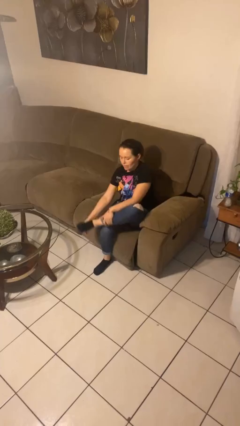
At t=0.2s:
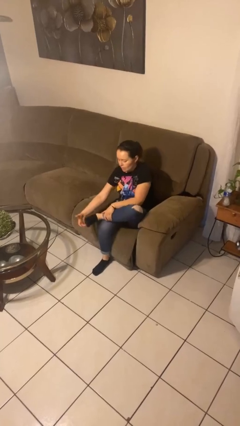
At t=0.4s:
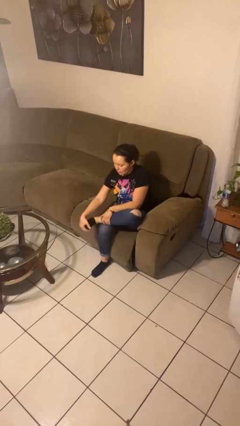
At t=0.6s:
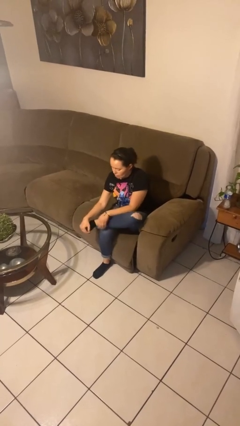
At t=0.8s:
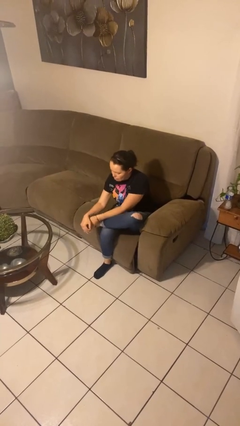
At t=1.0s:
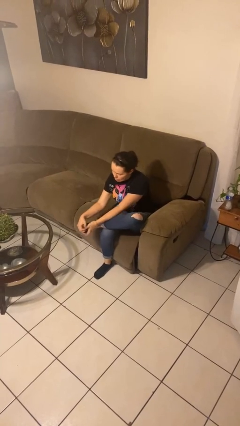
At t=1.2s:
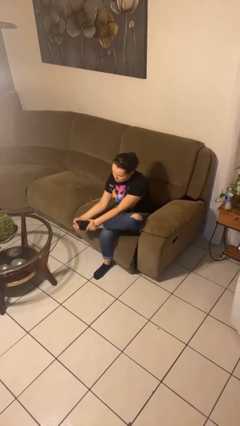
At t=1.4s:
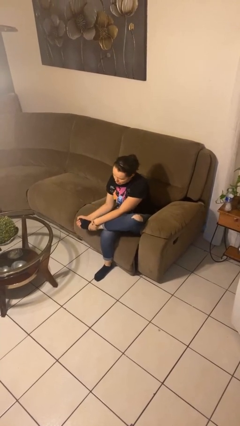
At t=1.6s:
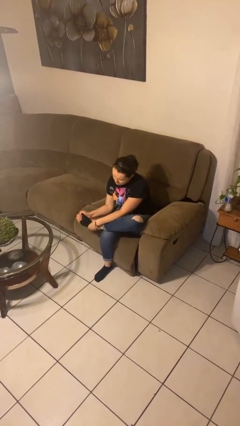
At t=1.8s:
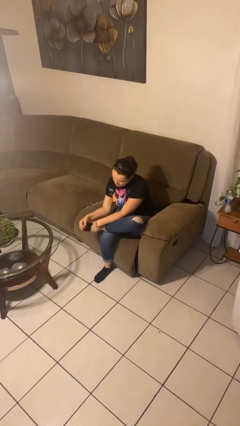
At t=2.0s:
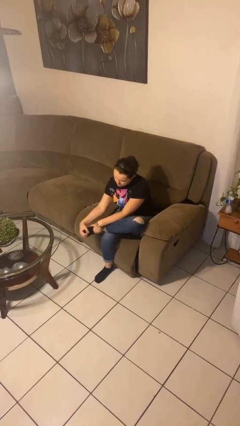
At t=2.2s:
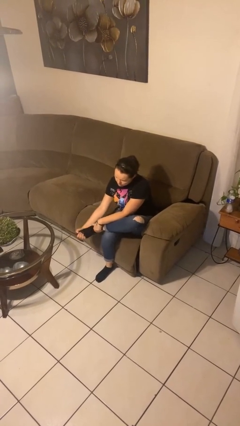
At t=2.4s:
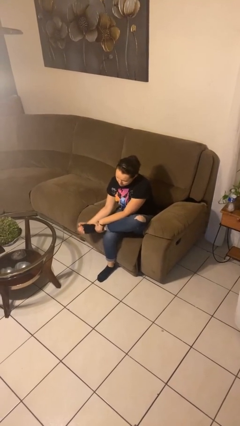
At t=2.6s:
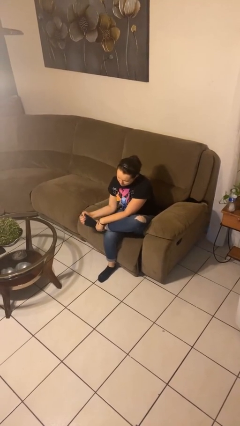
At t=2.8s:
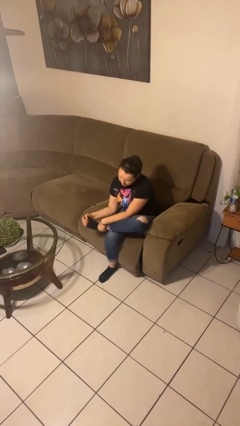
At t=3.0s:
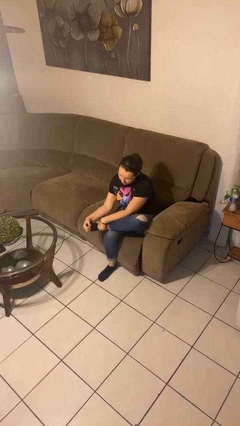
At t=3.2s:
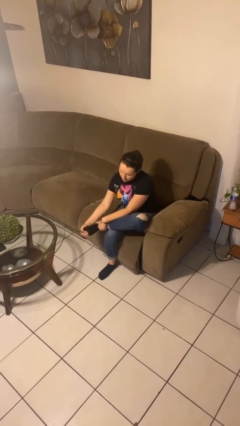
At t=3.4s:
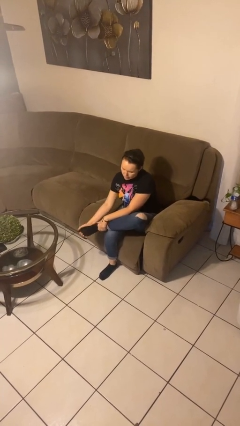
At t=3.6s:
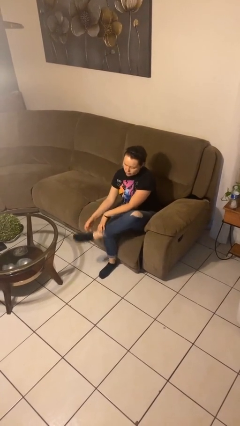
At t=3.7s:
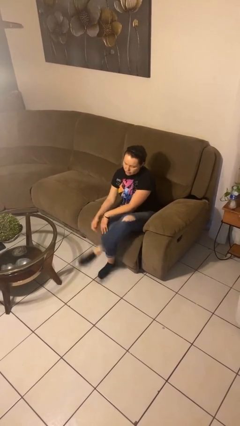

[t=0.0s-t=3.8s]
person rubs foot

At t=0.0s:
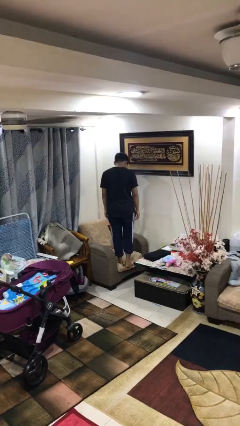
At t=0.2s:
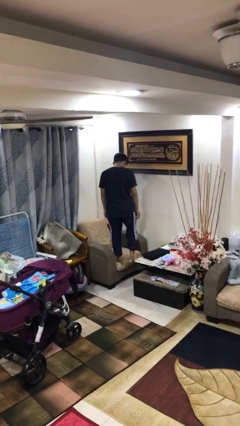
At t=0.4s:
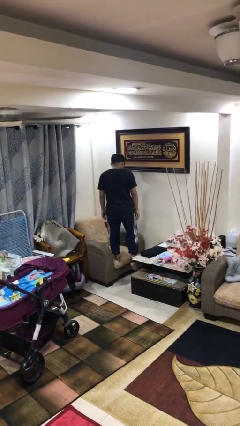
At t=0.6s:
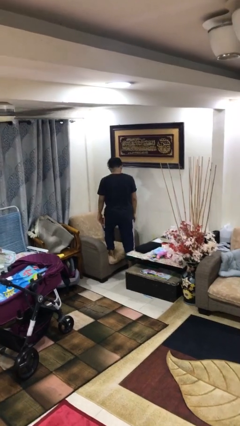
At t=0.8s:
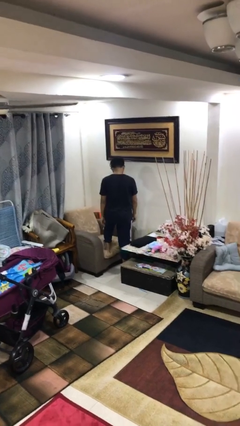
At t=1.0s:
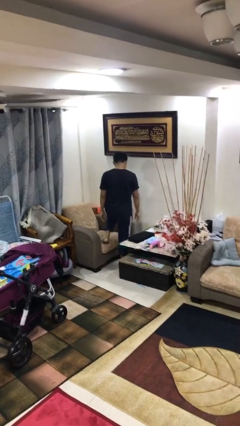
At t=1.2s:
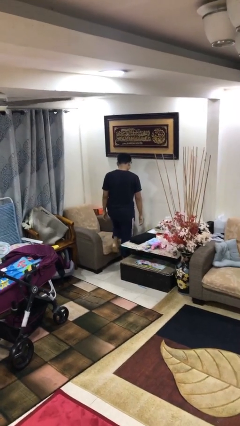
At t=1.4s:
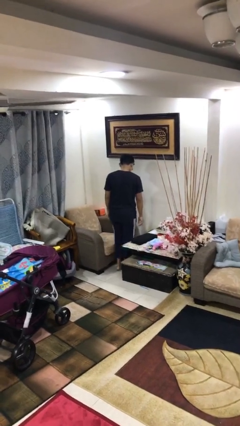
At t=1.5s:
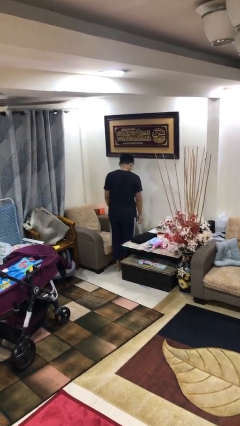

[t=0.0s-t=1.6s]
person climbs off couch

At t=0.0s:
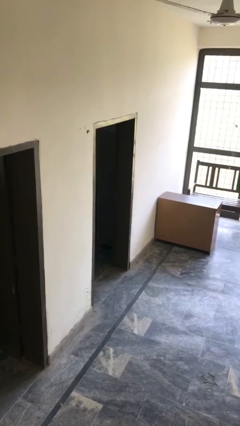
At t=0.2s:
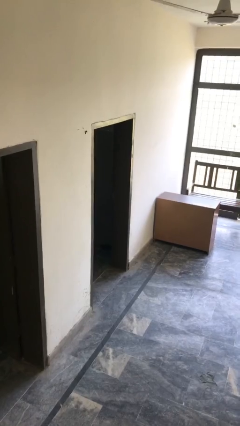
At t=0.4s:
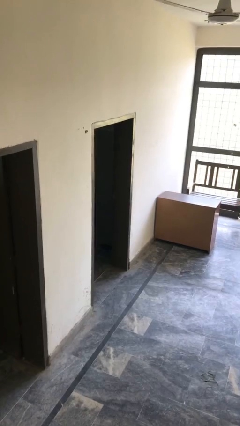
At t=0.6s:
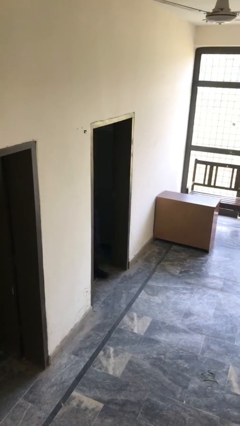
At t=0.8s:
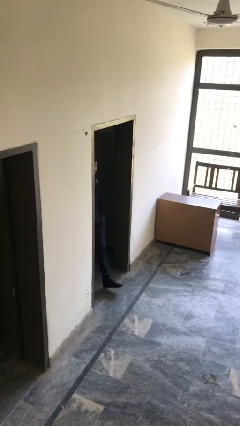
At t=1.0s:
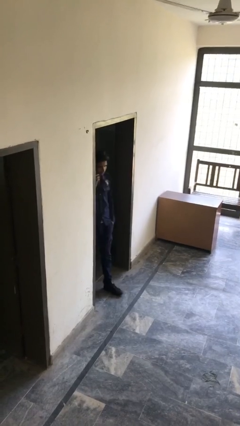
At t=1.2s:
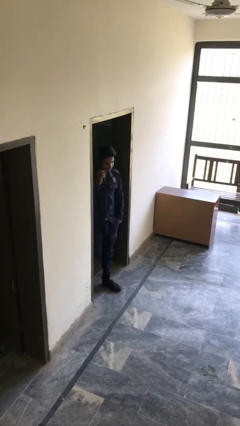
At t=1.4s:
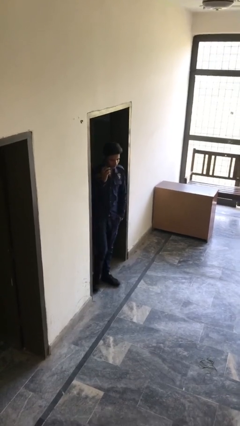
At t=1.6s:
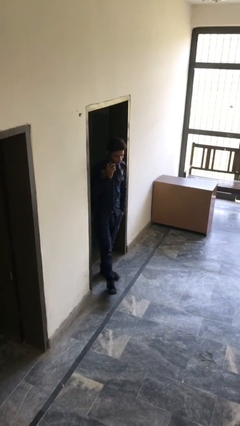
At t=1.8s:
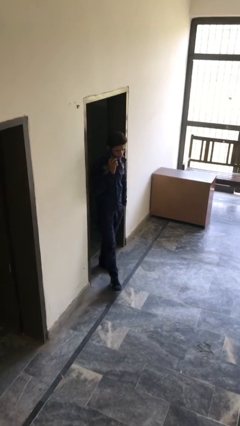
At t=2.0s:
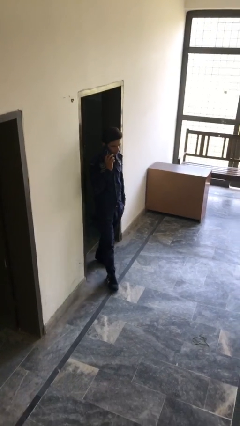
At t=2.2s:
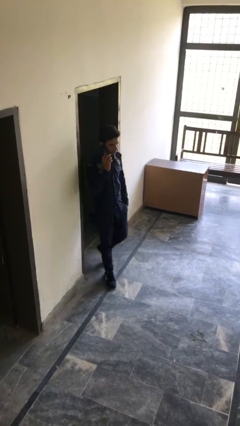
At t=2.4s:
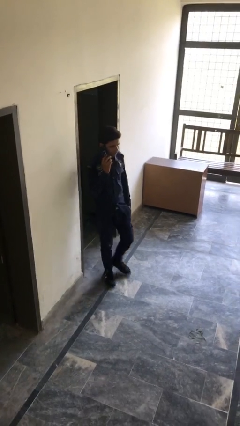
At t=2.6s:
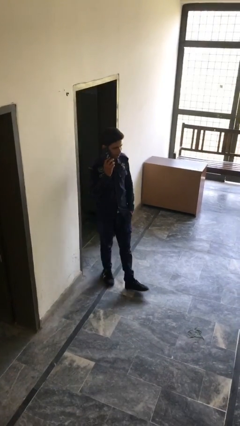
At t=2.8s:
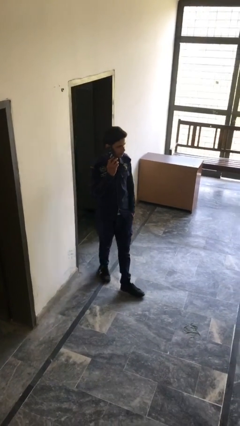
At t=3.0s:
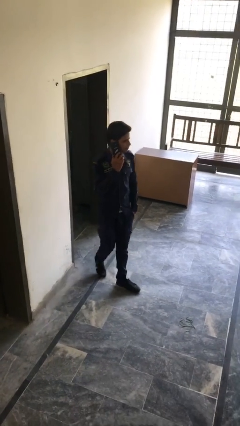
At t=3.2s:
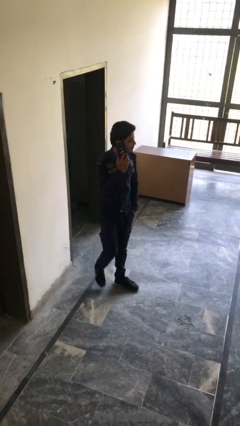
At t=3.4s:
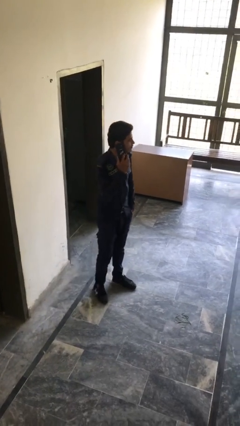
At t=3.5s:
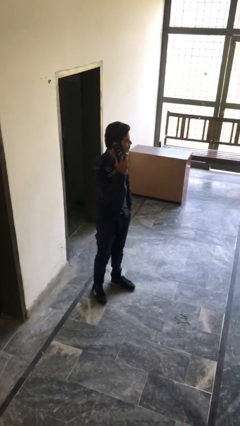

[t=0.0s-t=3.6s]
person enters scene through structure

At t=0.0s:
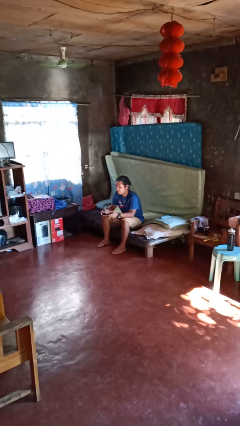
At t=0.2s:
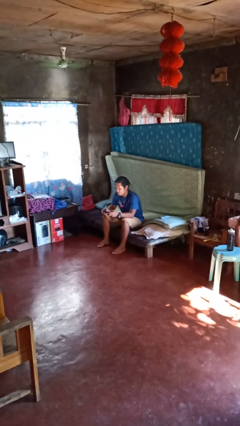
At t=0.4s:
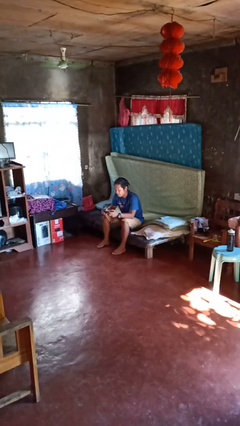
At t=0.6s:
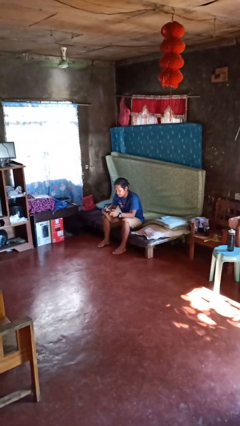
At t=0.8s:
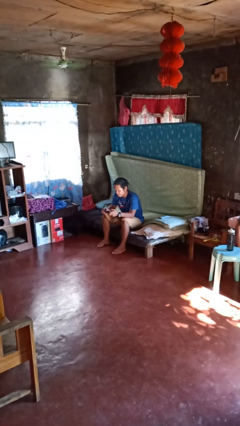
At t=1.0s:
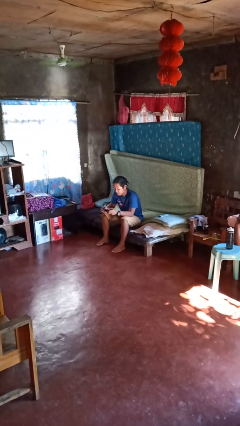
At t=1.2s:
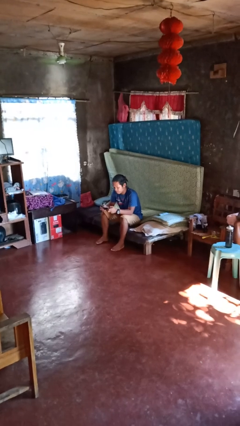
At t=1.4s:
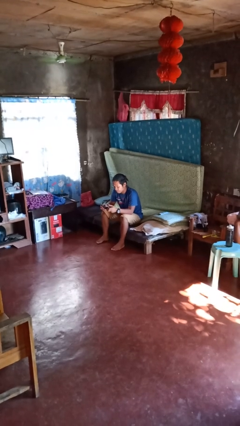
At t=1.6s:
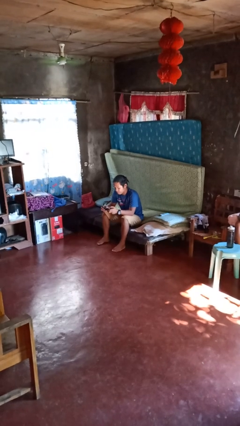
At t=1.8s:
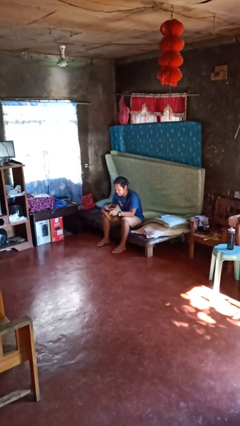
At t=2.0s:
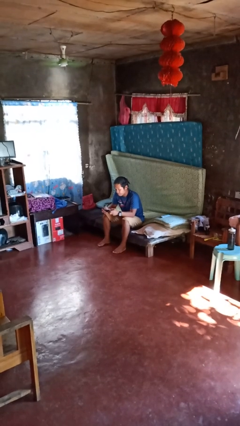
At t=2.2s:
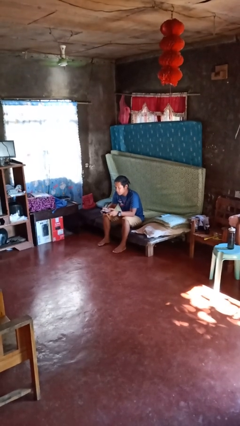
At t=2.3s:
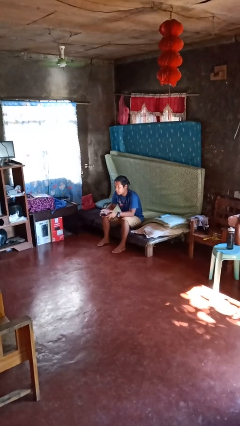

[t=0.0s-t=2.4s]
person interacts with handheld game

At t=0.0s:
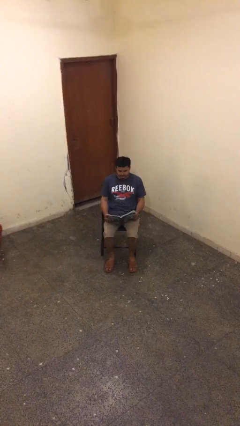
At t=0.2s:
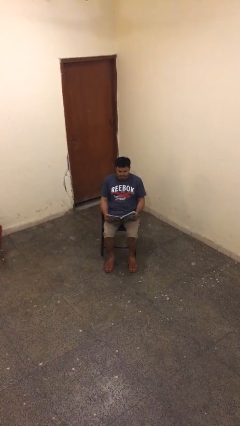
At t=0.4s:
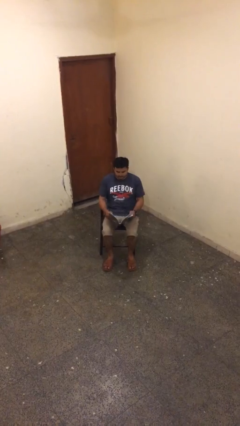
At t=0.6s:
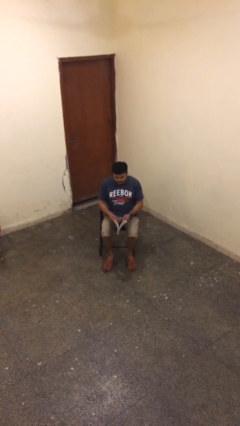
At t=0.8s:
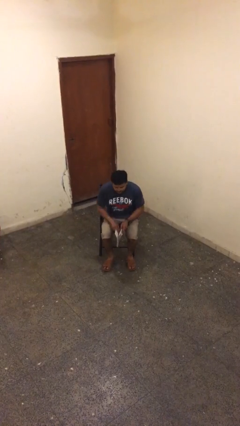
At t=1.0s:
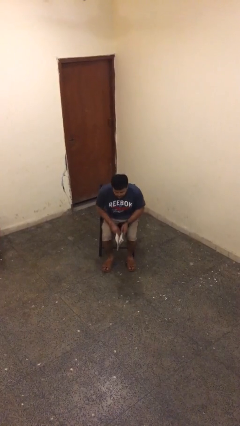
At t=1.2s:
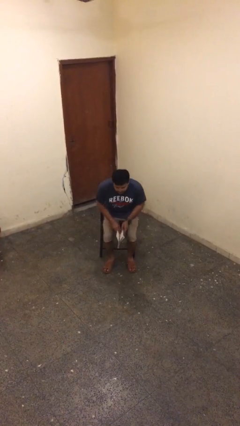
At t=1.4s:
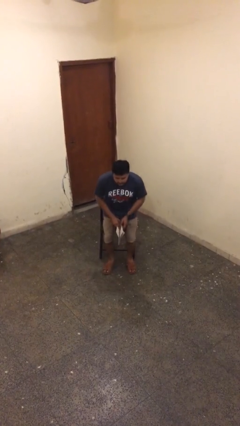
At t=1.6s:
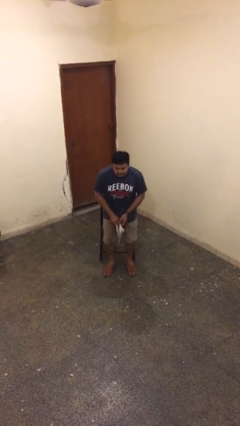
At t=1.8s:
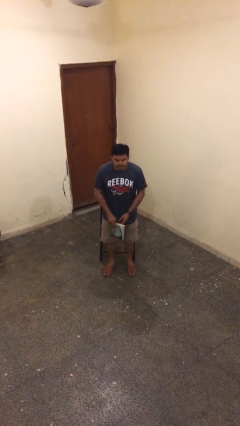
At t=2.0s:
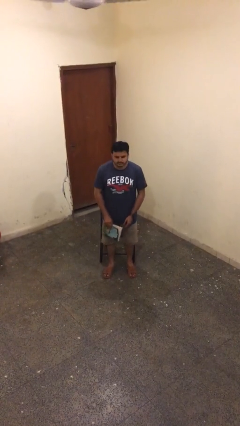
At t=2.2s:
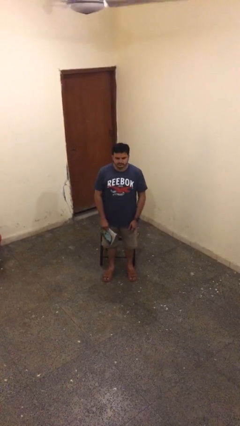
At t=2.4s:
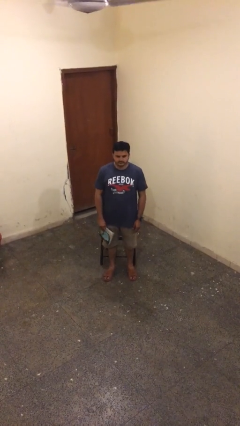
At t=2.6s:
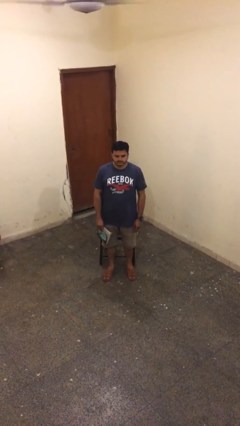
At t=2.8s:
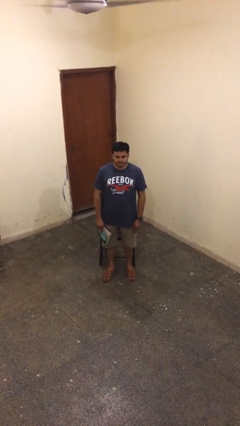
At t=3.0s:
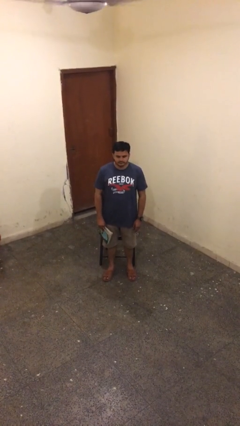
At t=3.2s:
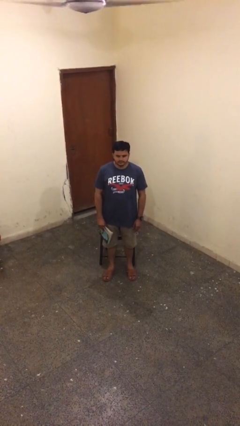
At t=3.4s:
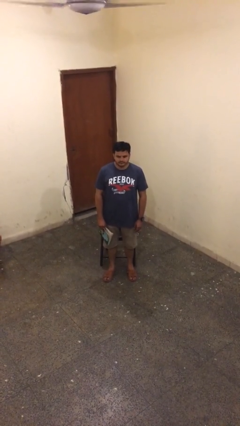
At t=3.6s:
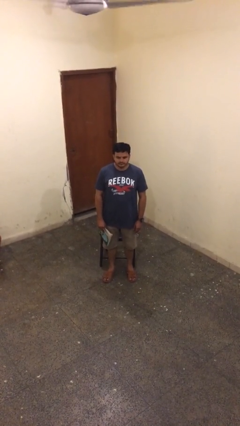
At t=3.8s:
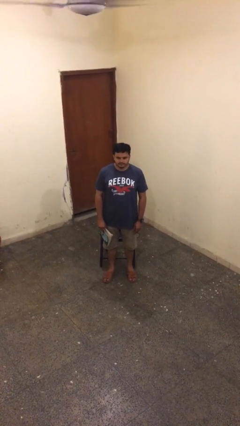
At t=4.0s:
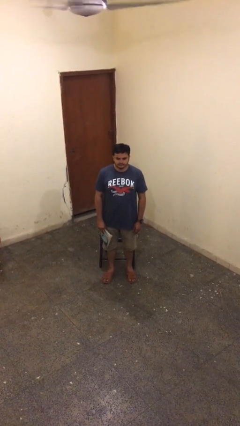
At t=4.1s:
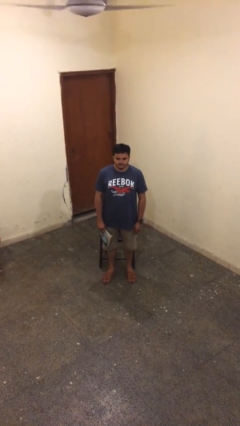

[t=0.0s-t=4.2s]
person stands up

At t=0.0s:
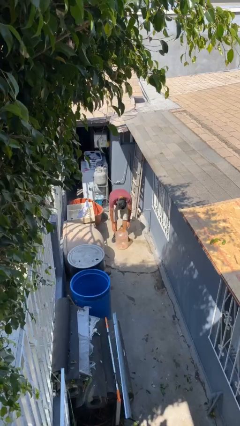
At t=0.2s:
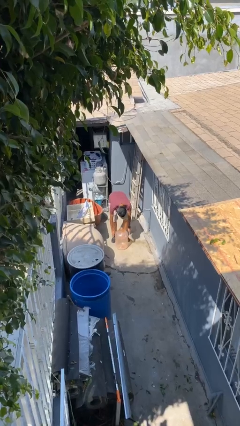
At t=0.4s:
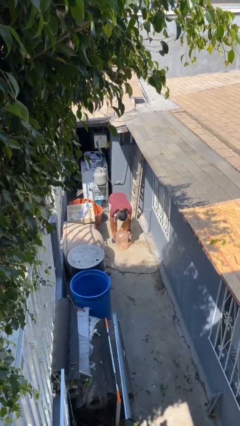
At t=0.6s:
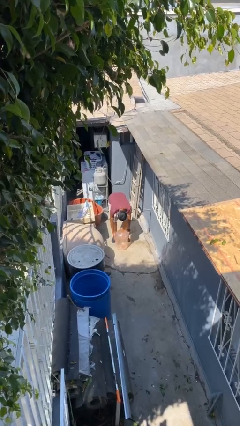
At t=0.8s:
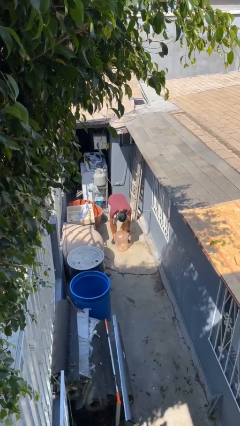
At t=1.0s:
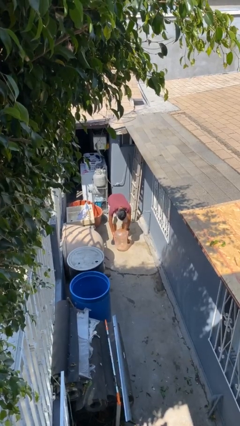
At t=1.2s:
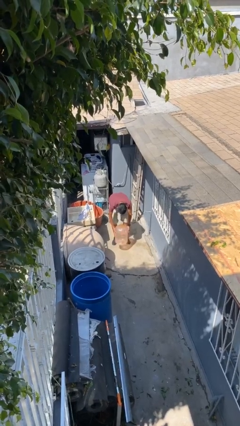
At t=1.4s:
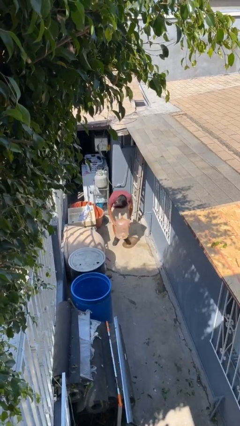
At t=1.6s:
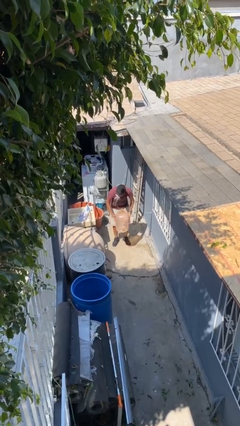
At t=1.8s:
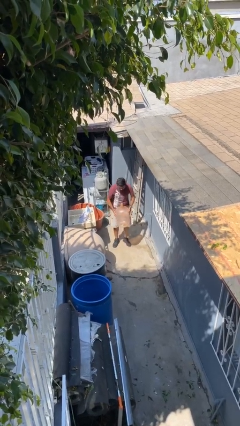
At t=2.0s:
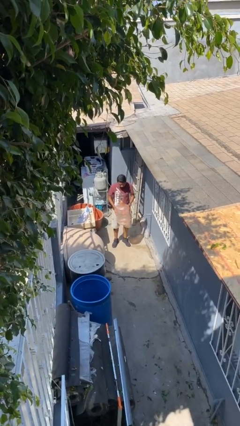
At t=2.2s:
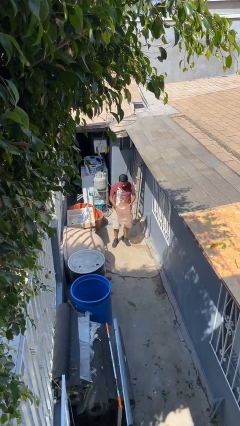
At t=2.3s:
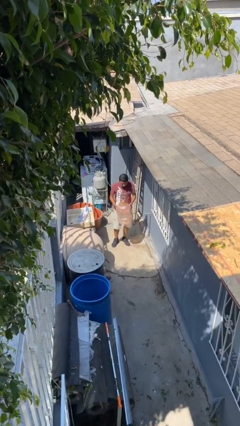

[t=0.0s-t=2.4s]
person picks up object from floor
